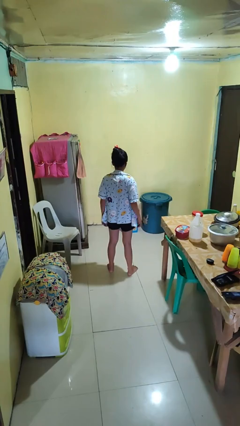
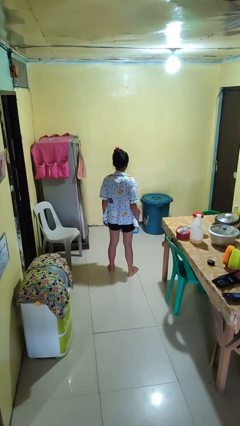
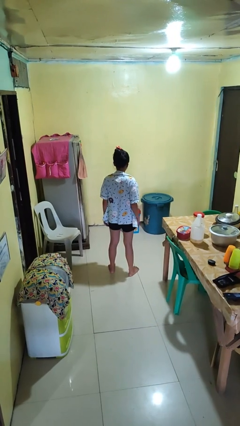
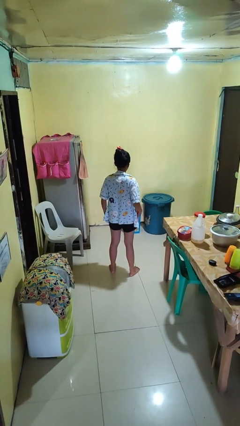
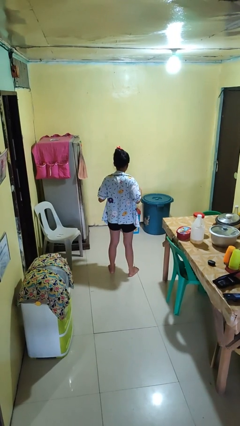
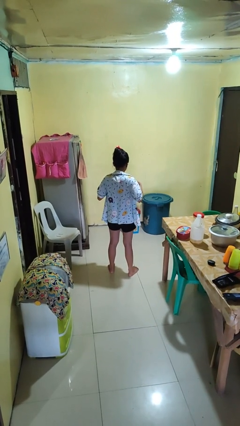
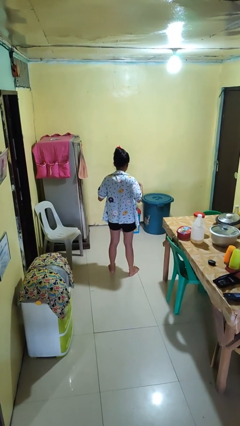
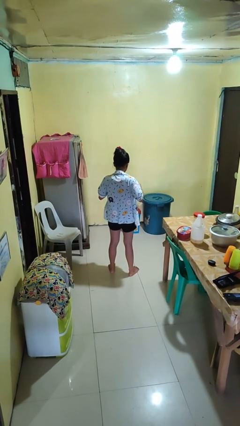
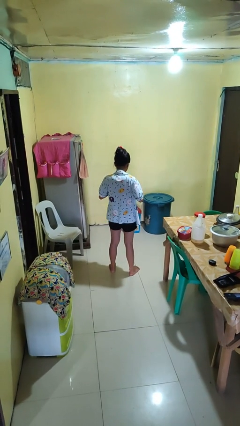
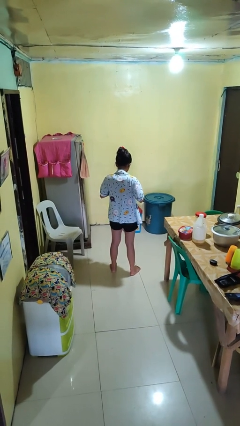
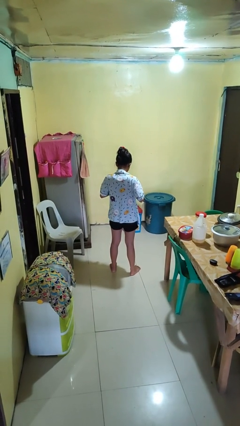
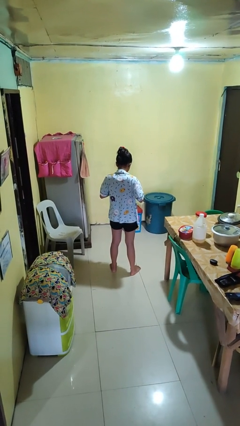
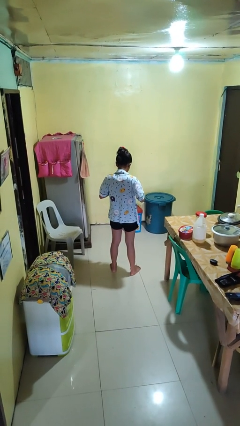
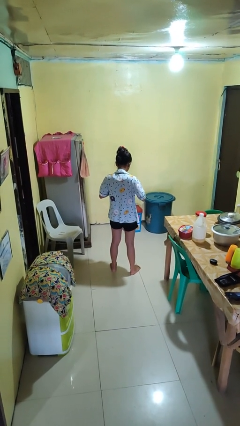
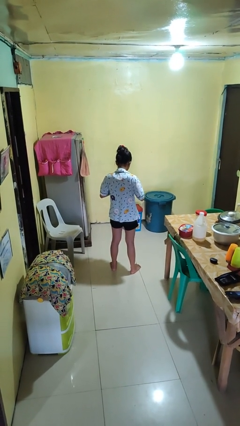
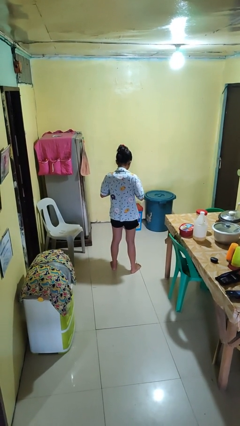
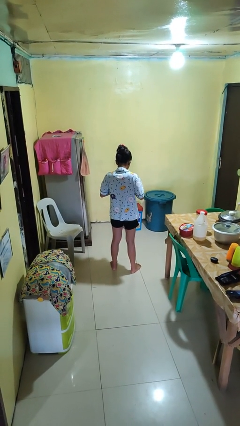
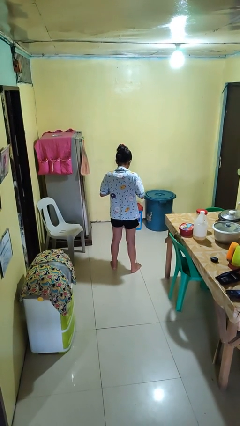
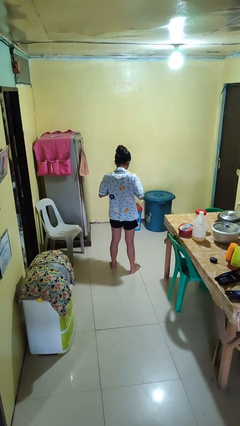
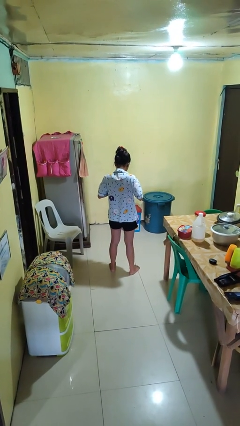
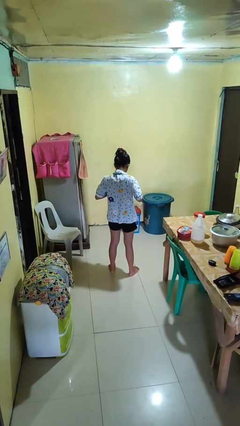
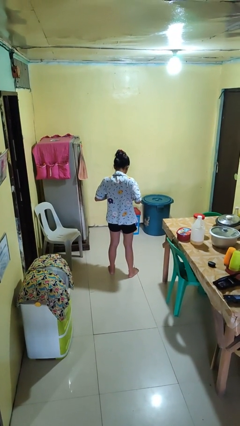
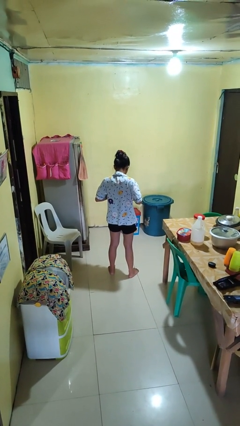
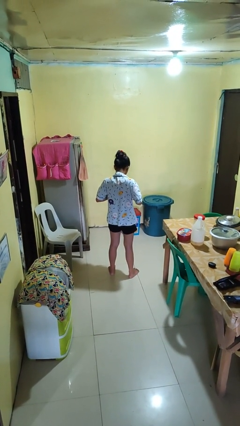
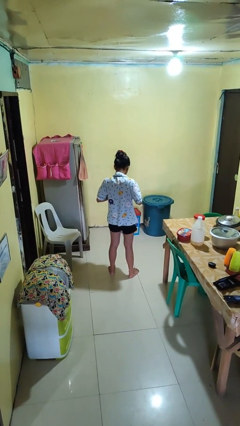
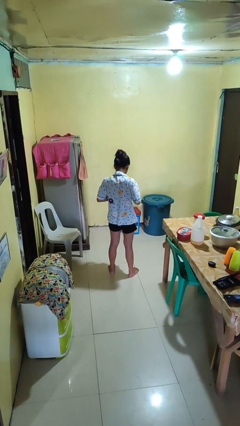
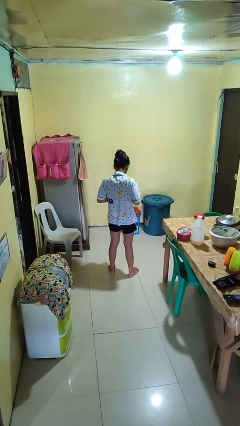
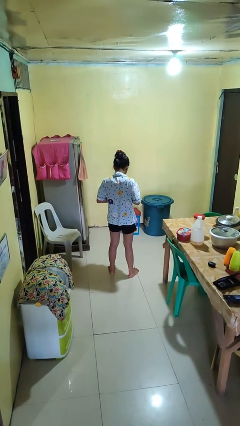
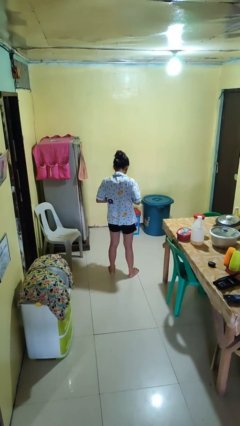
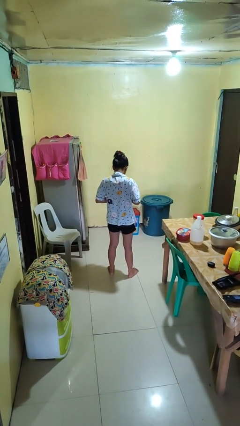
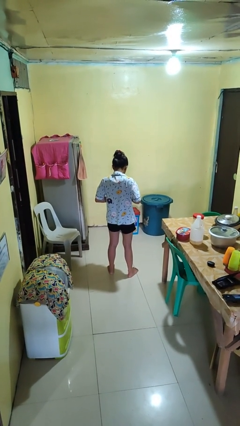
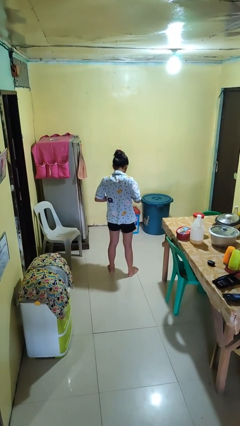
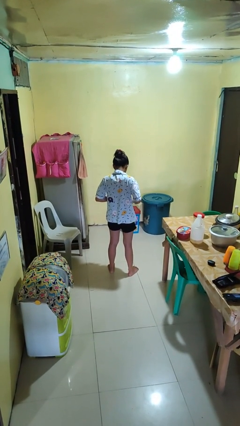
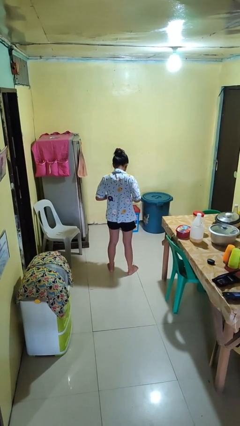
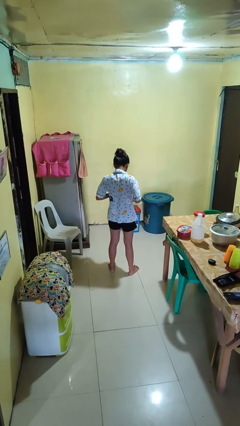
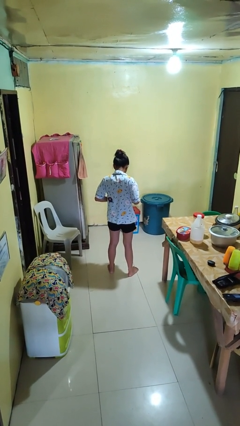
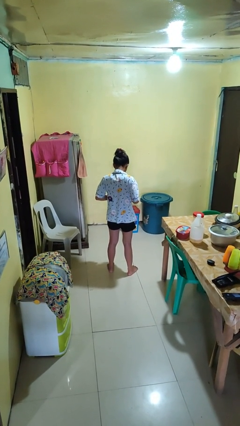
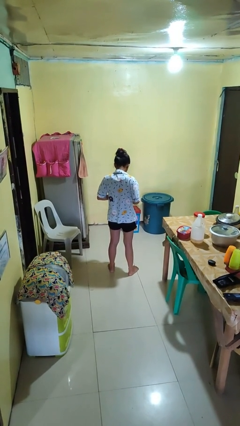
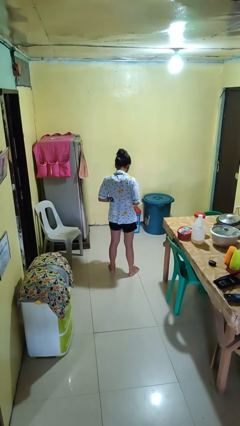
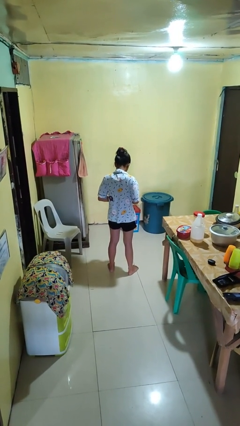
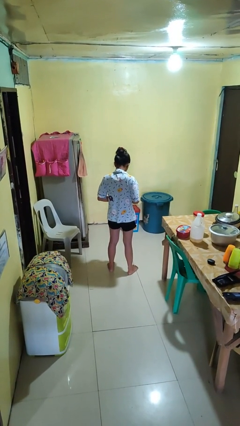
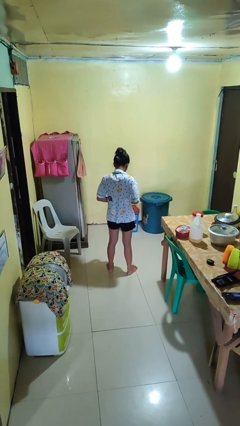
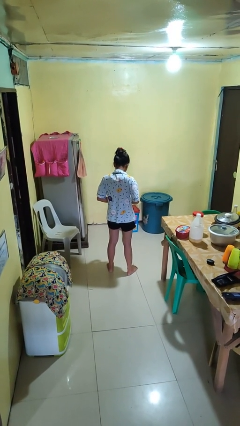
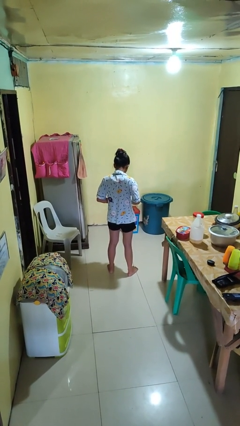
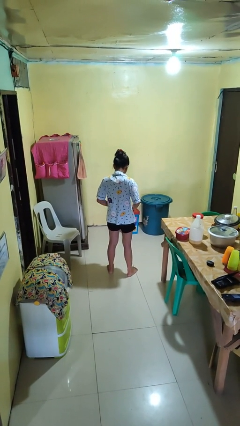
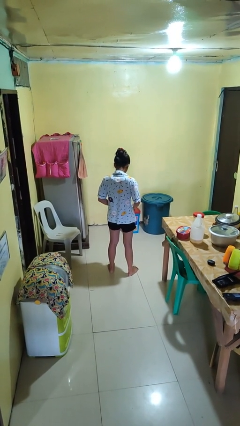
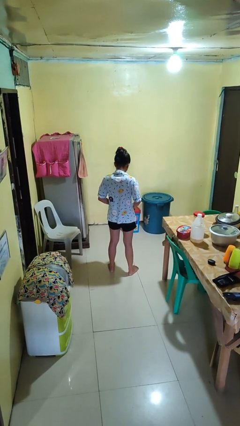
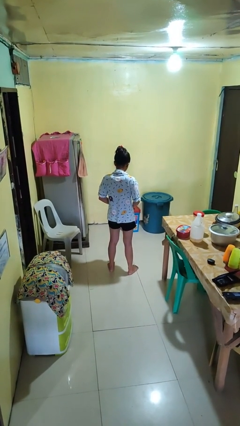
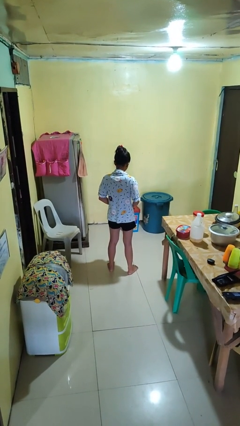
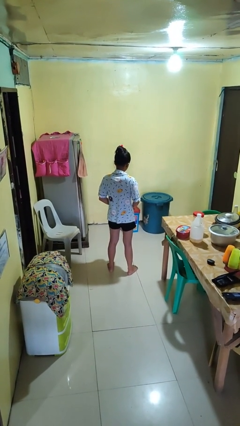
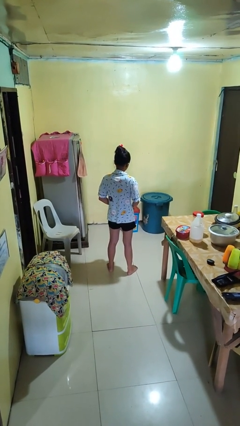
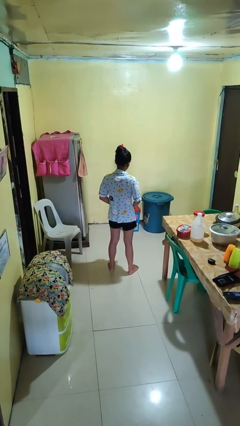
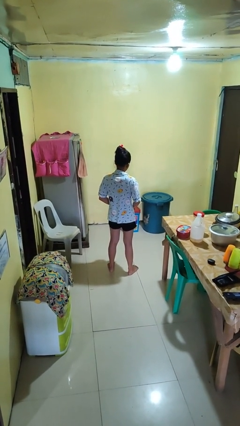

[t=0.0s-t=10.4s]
person buttons shirt

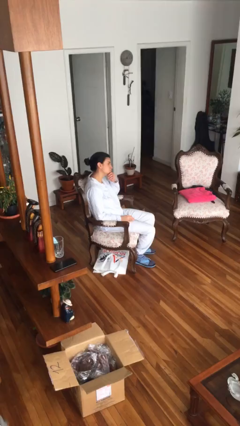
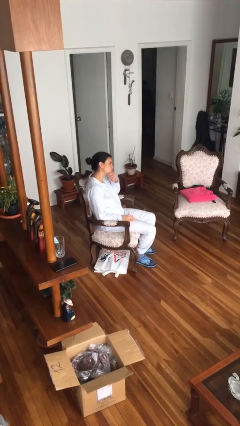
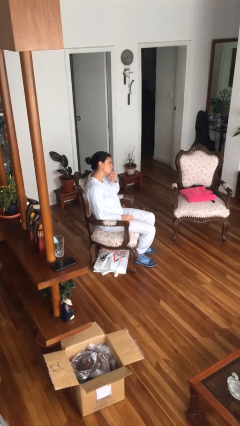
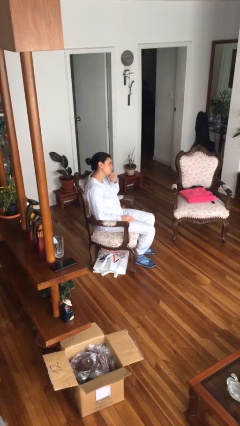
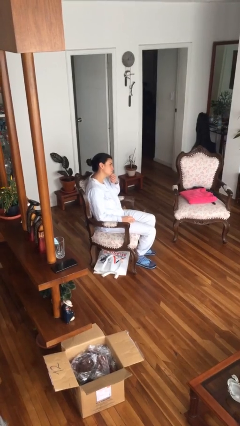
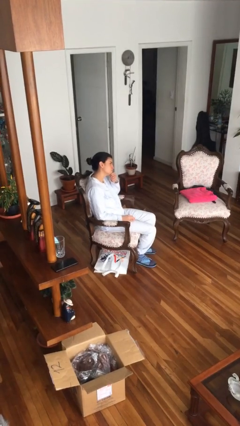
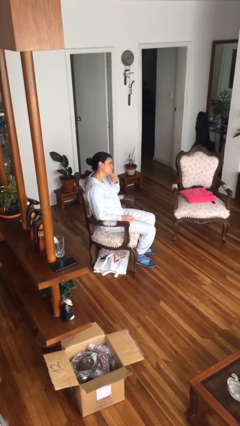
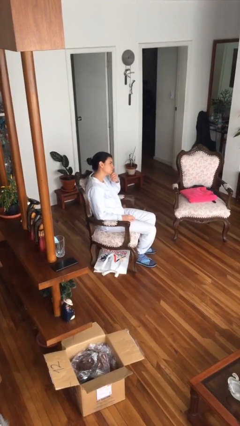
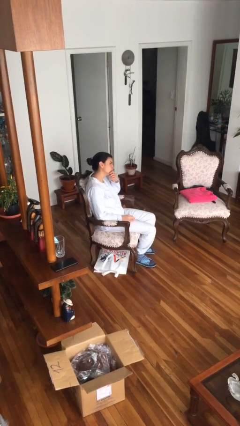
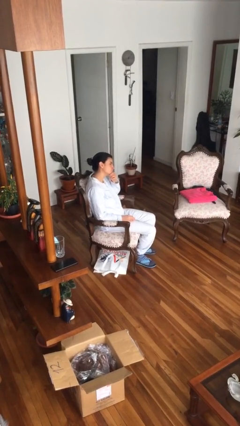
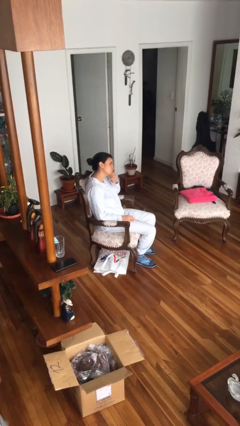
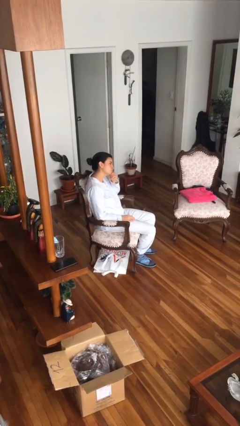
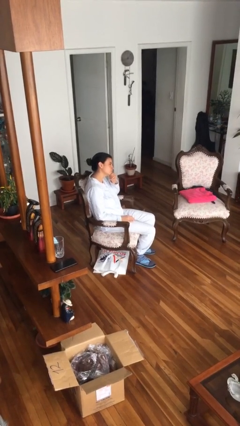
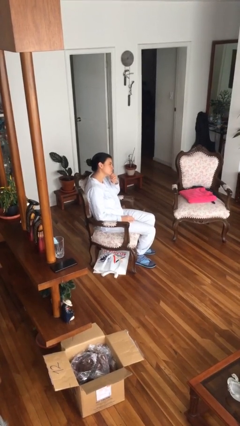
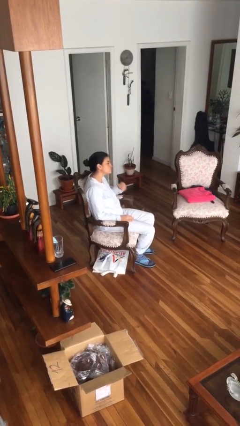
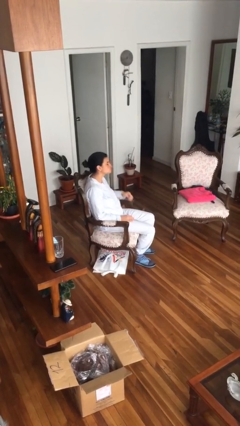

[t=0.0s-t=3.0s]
person strokes chin

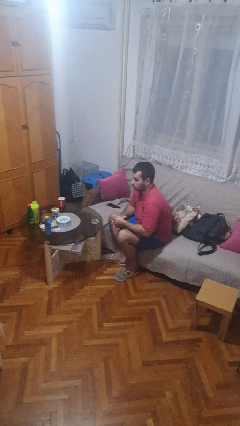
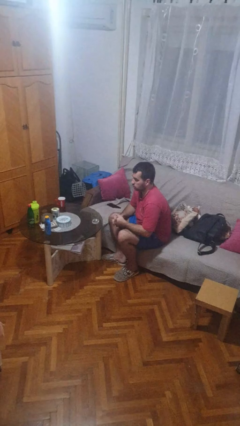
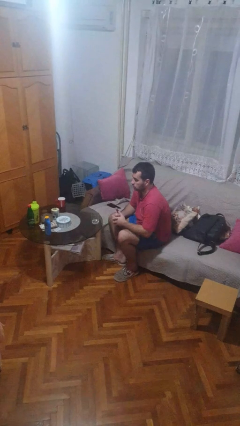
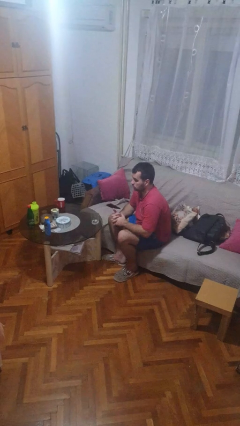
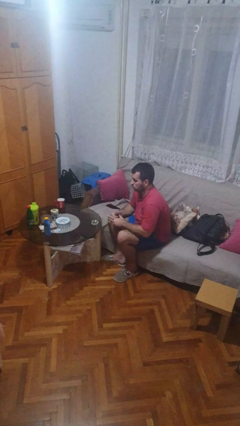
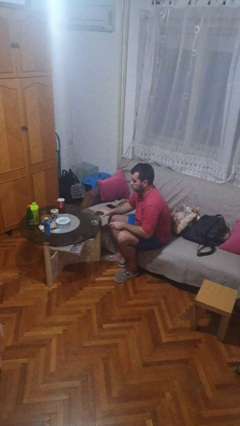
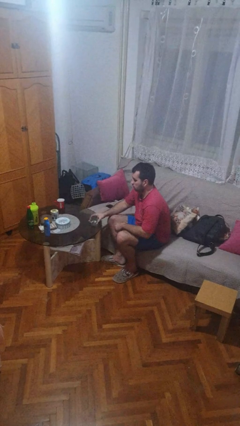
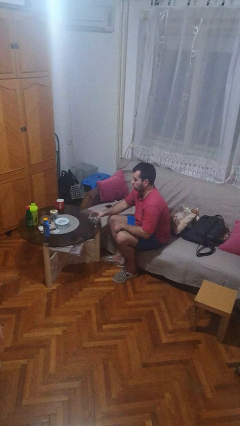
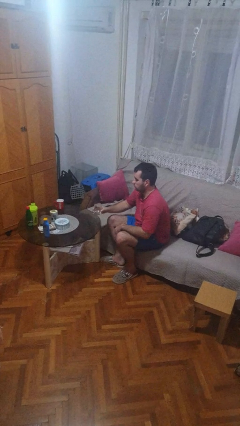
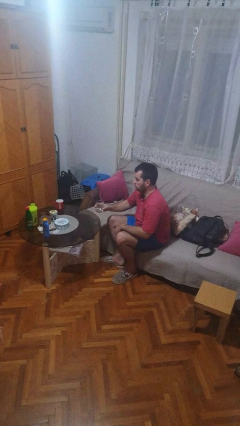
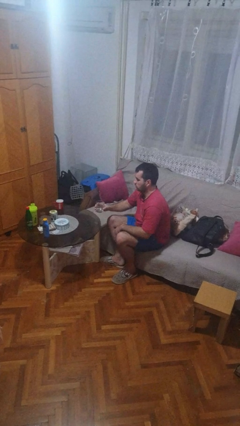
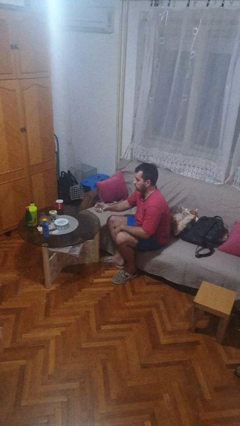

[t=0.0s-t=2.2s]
person picks up object from table

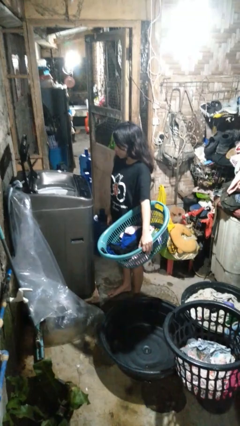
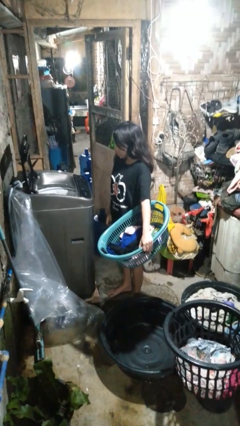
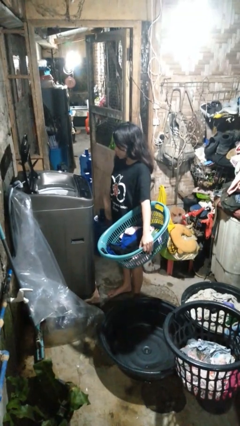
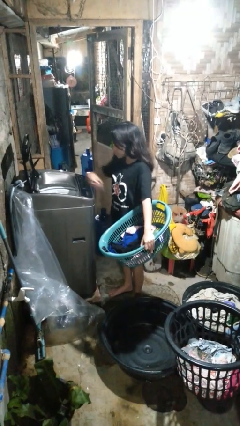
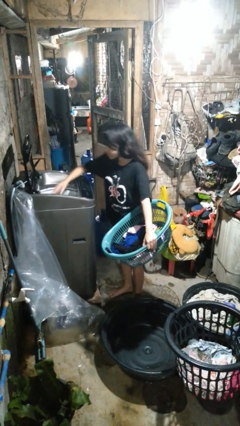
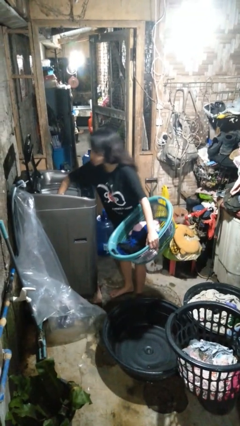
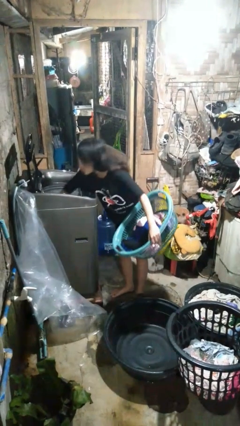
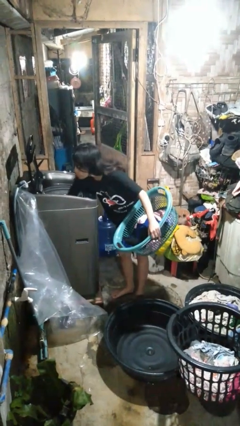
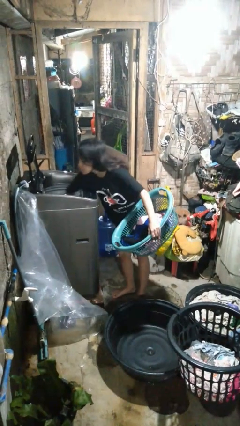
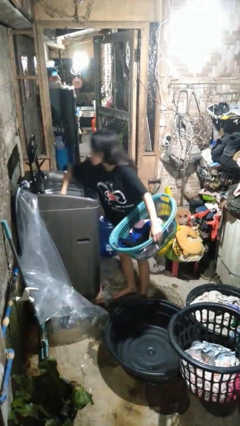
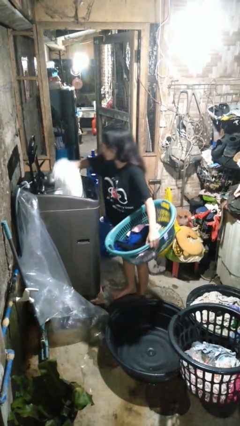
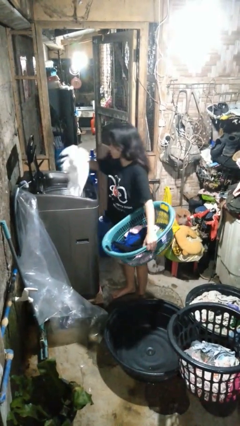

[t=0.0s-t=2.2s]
person loads clotheswasher
